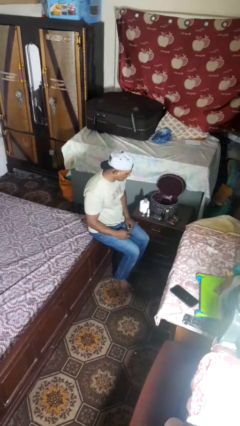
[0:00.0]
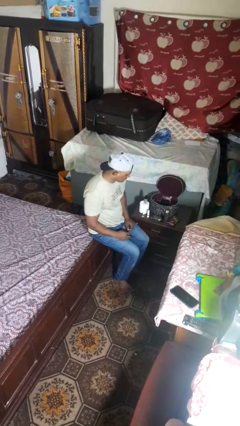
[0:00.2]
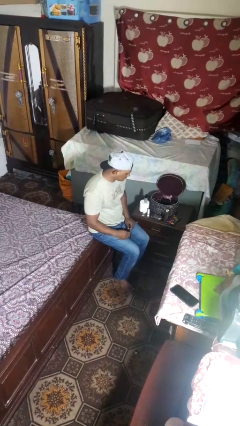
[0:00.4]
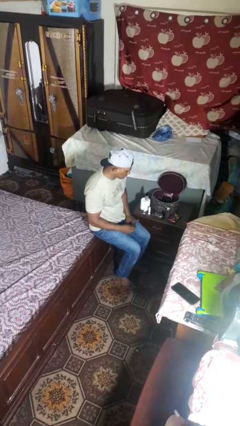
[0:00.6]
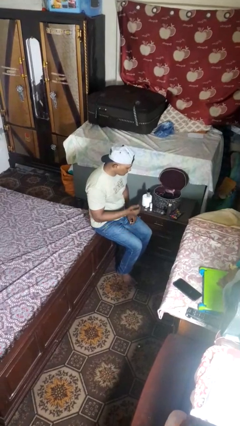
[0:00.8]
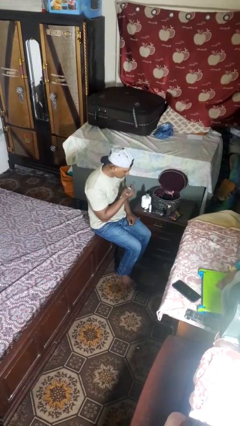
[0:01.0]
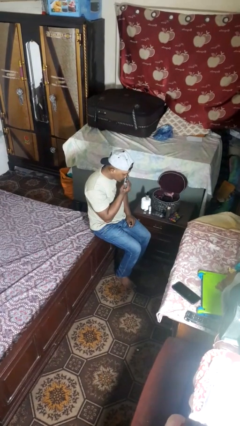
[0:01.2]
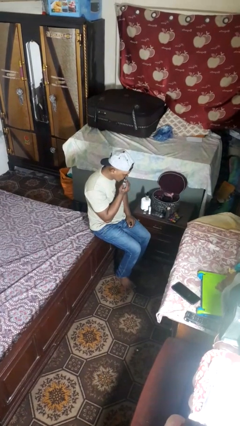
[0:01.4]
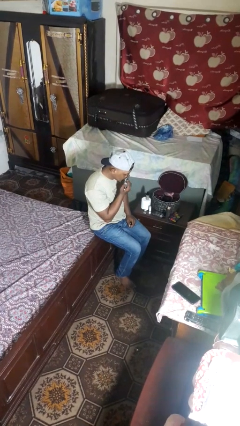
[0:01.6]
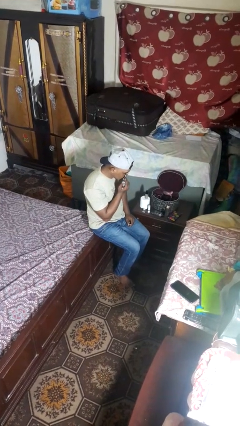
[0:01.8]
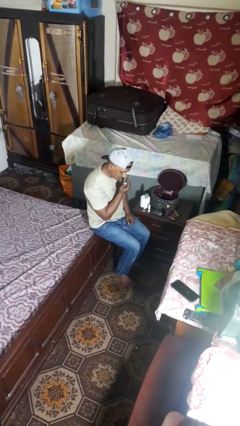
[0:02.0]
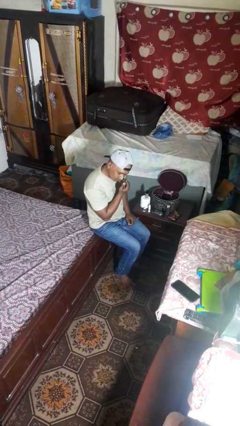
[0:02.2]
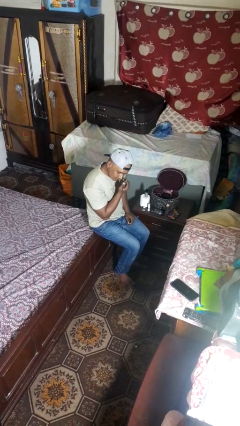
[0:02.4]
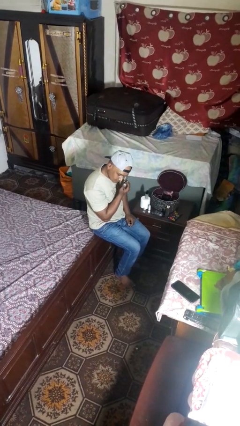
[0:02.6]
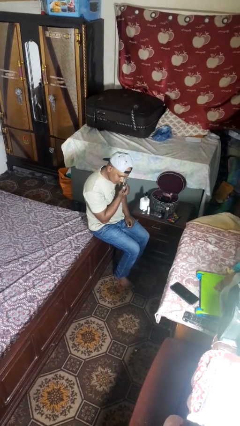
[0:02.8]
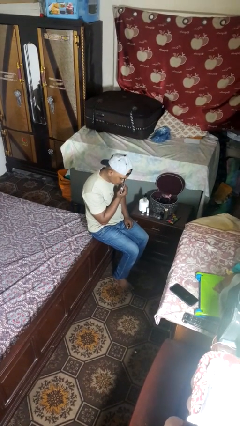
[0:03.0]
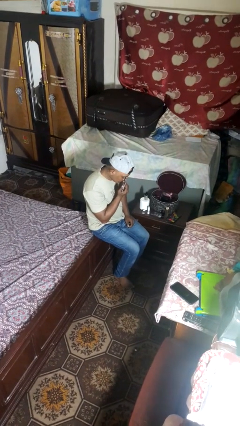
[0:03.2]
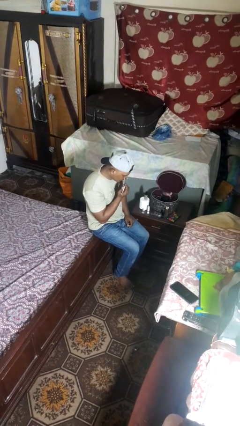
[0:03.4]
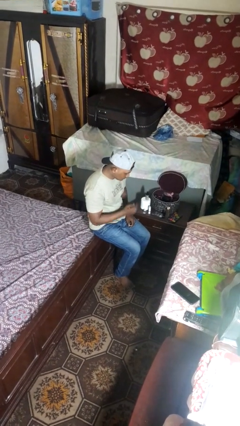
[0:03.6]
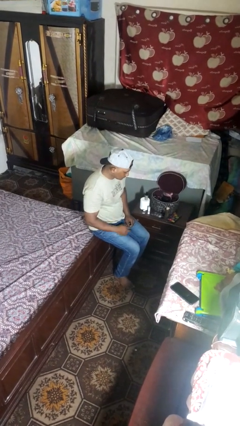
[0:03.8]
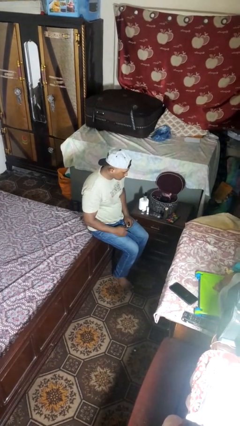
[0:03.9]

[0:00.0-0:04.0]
person applies eye makeup

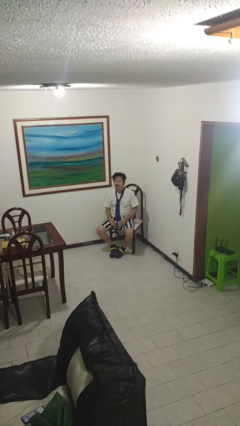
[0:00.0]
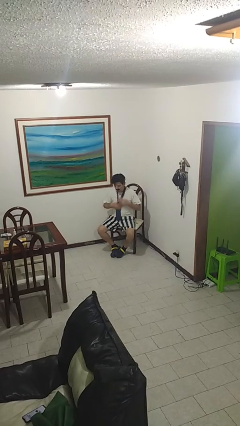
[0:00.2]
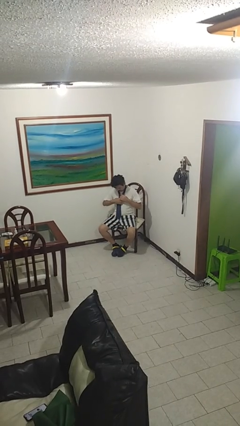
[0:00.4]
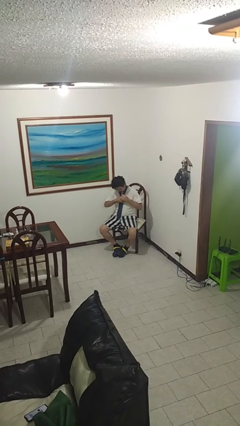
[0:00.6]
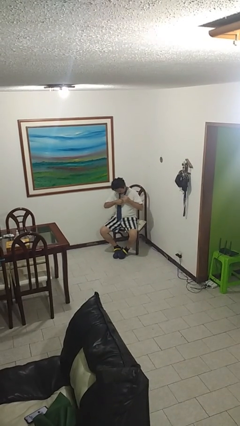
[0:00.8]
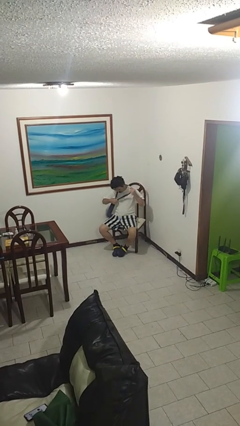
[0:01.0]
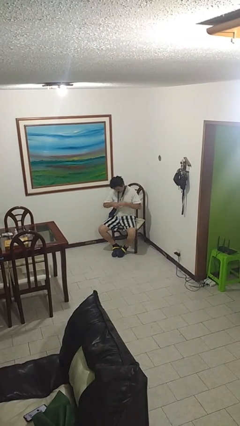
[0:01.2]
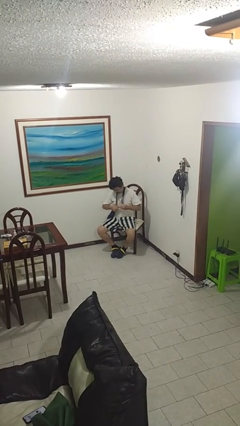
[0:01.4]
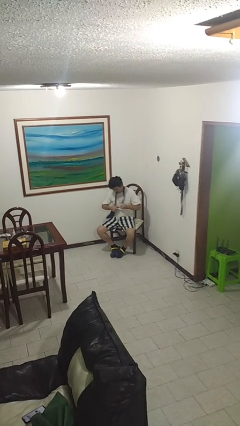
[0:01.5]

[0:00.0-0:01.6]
person takes off necktie

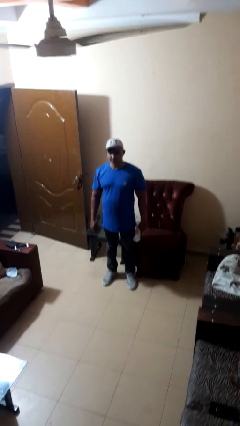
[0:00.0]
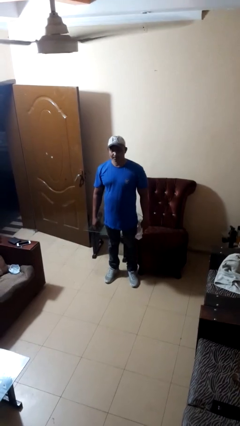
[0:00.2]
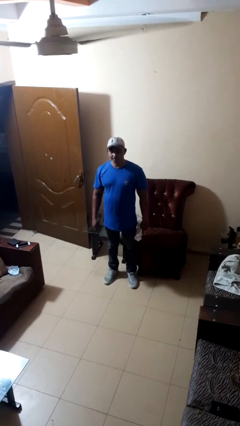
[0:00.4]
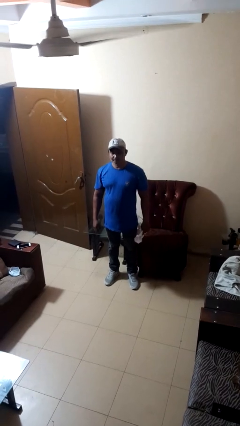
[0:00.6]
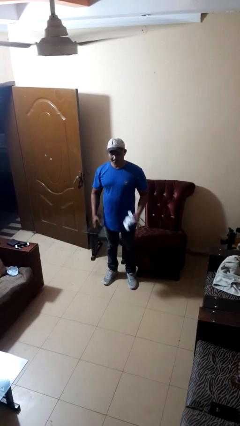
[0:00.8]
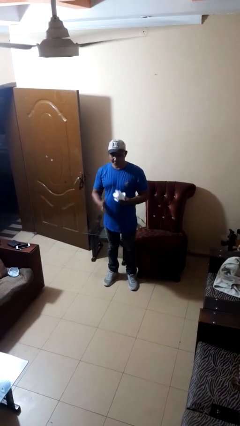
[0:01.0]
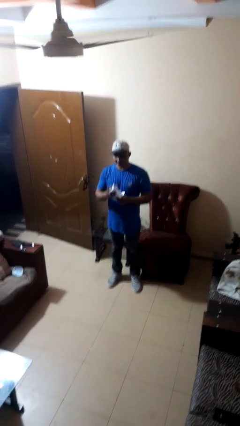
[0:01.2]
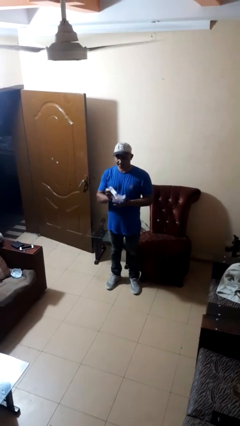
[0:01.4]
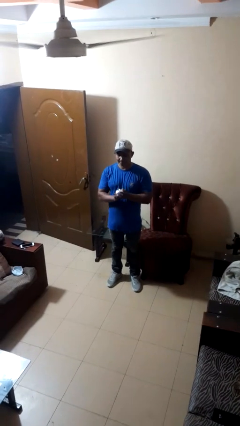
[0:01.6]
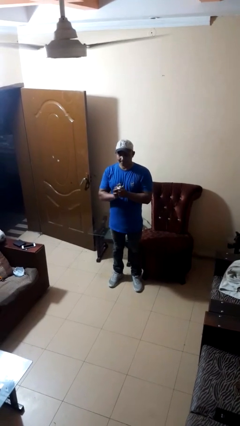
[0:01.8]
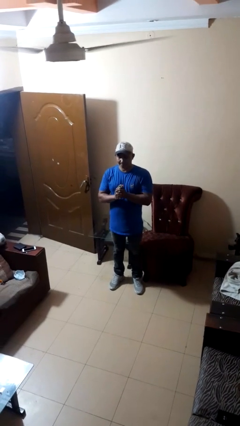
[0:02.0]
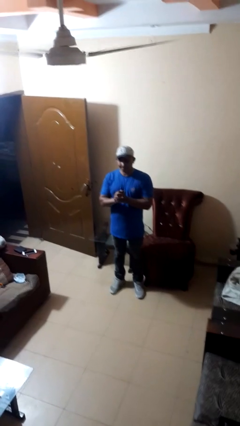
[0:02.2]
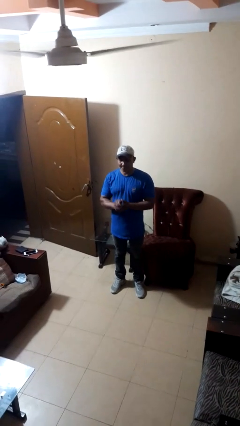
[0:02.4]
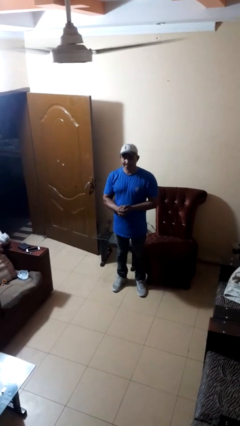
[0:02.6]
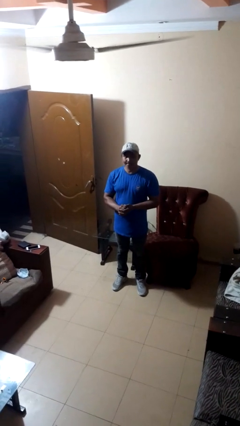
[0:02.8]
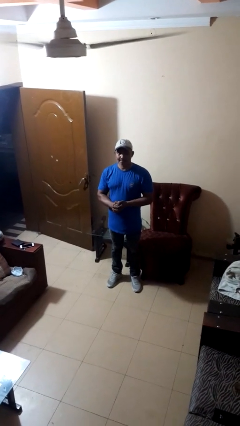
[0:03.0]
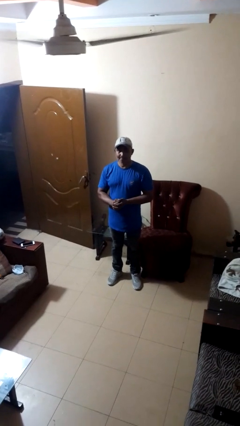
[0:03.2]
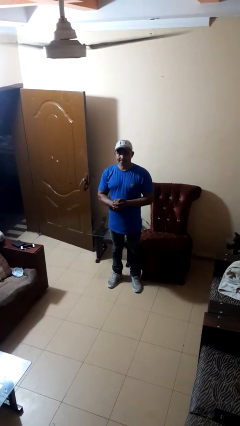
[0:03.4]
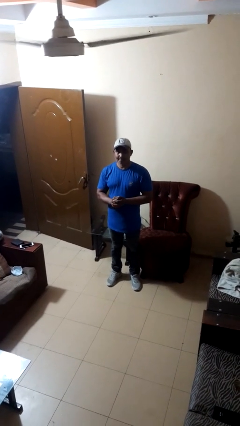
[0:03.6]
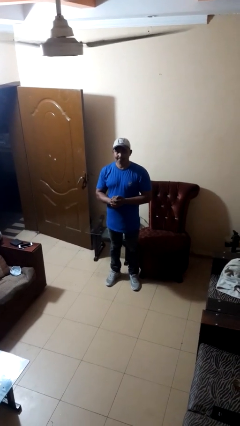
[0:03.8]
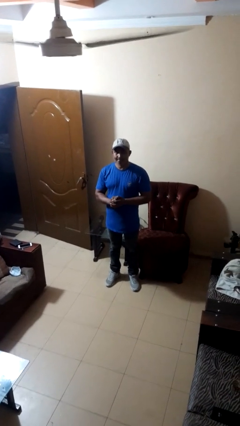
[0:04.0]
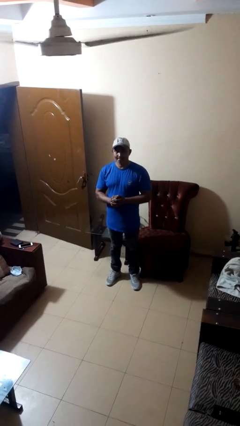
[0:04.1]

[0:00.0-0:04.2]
person crumples paper

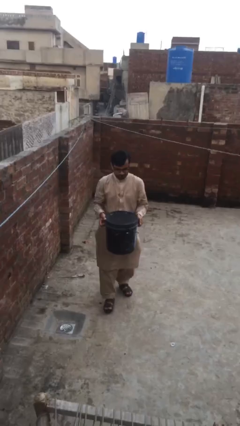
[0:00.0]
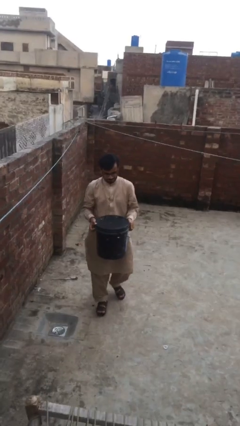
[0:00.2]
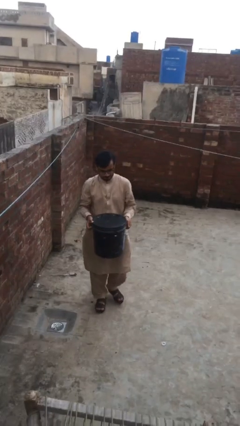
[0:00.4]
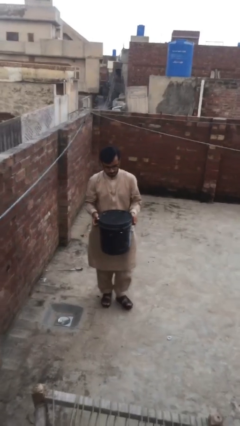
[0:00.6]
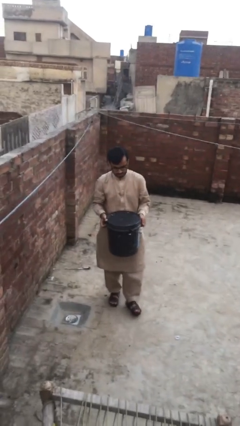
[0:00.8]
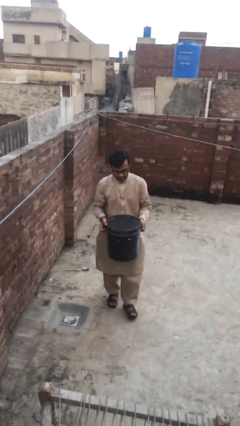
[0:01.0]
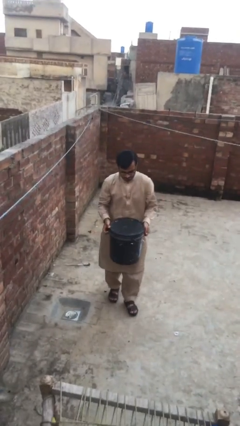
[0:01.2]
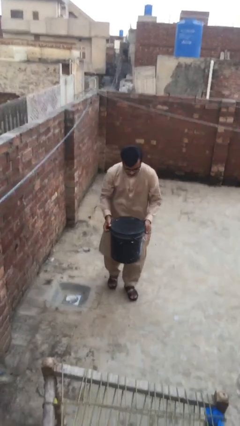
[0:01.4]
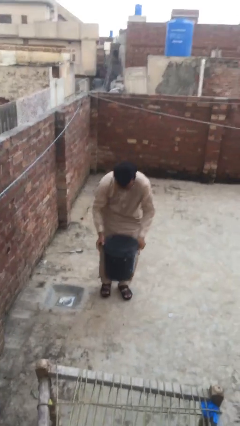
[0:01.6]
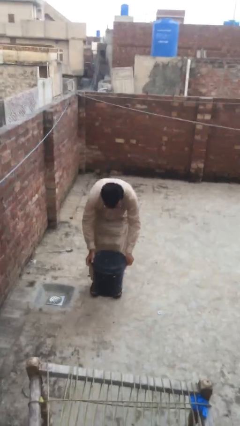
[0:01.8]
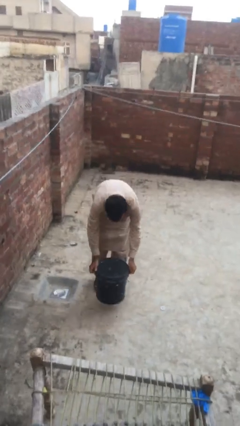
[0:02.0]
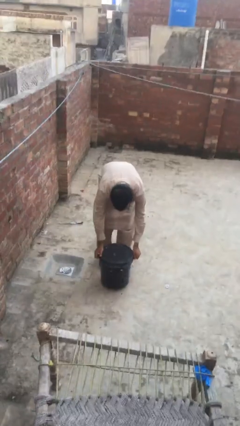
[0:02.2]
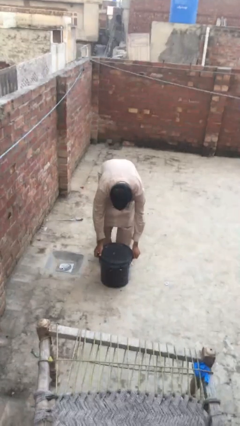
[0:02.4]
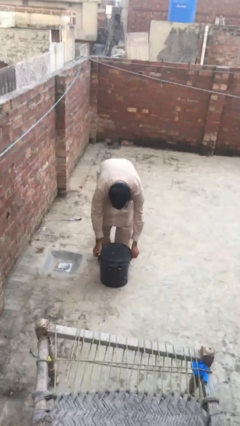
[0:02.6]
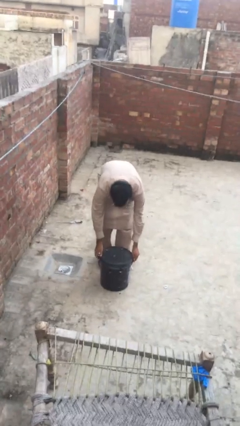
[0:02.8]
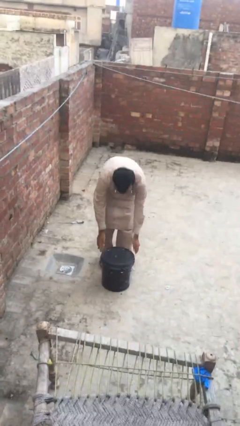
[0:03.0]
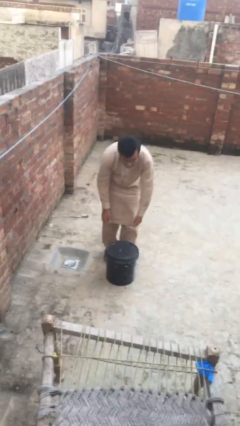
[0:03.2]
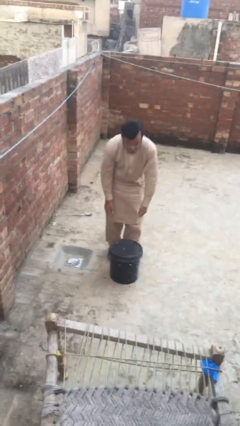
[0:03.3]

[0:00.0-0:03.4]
person puts down object on floor

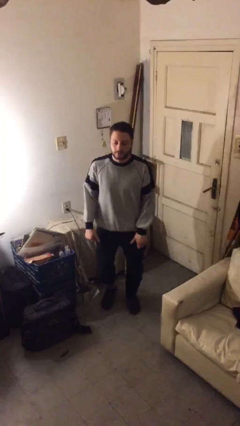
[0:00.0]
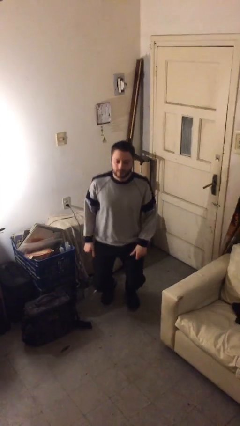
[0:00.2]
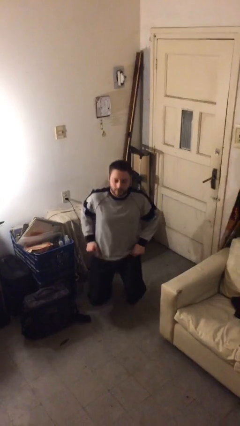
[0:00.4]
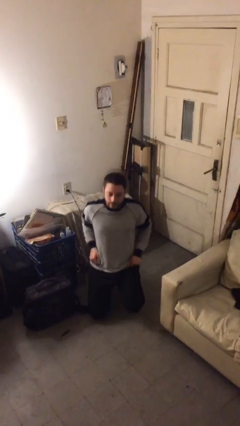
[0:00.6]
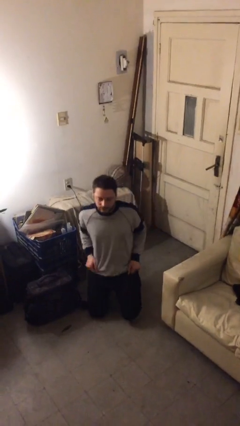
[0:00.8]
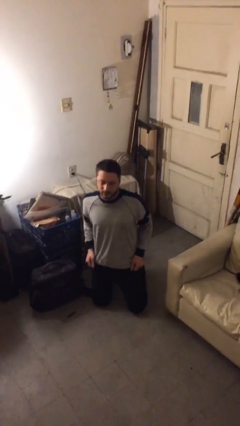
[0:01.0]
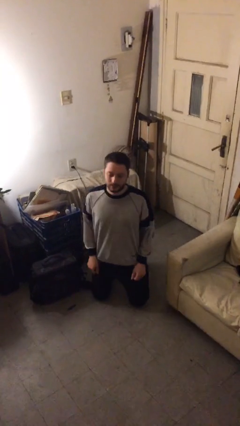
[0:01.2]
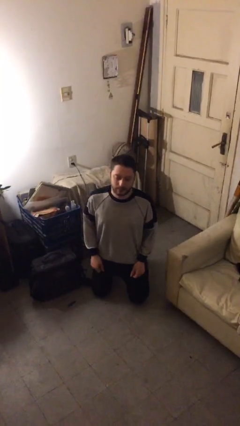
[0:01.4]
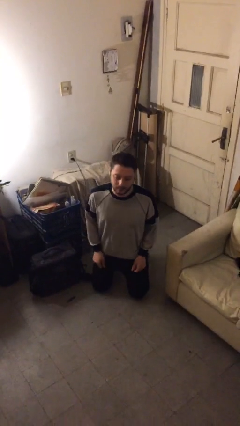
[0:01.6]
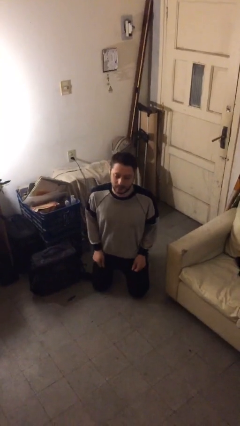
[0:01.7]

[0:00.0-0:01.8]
person crawls

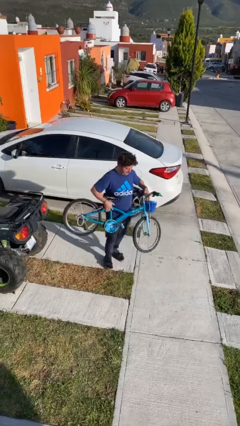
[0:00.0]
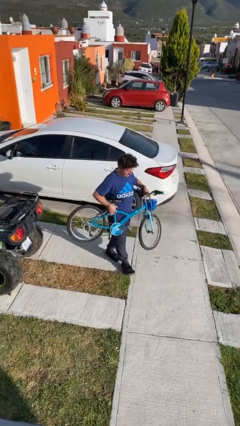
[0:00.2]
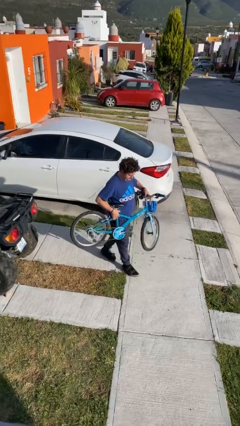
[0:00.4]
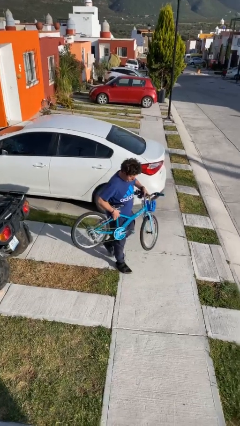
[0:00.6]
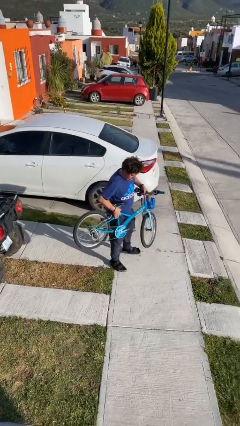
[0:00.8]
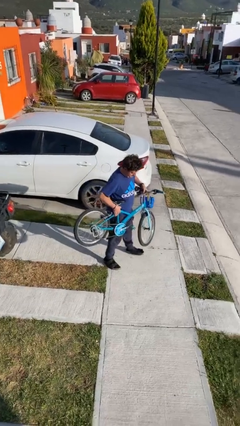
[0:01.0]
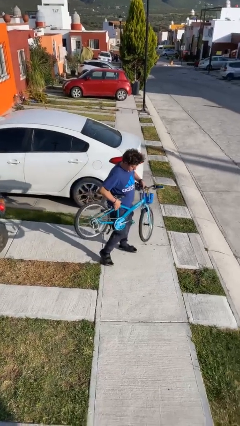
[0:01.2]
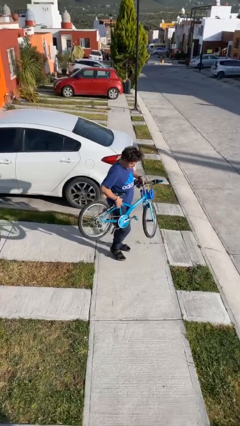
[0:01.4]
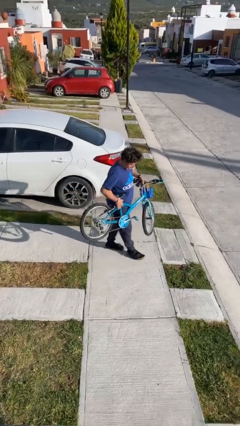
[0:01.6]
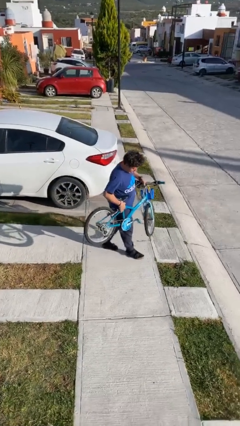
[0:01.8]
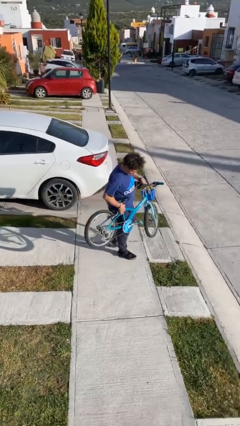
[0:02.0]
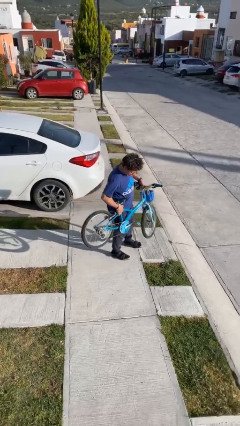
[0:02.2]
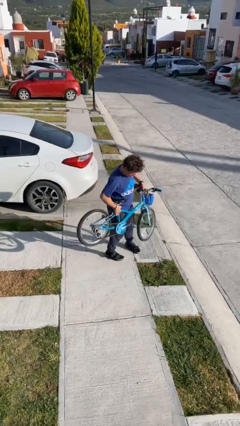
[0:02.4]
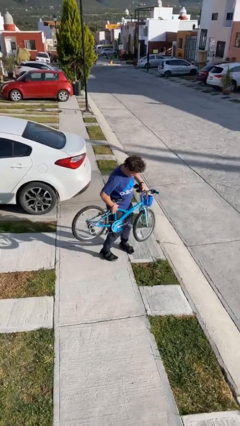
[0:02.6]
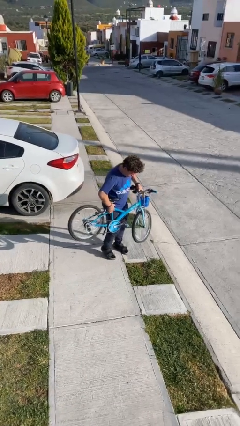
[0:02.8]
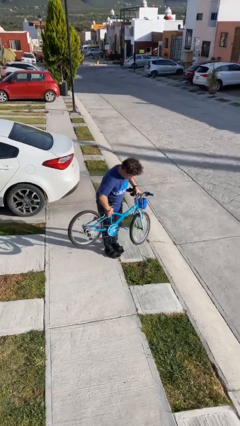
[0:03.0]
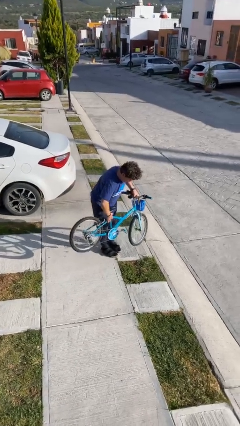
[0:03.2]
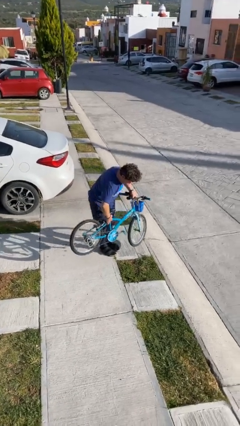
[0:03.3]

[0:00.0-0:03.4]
person carries heavy object
